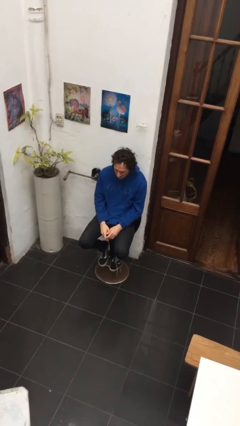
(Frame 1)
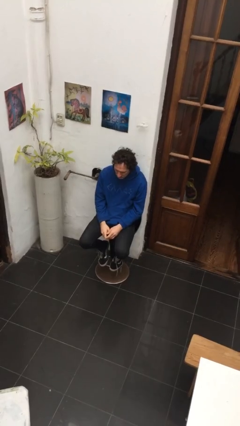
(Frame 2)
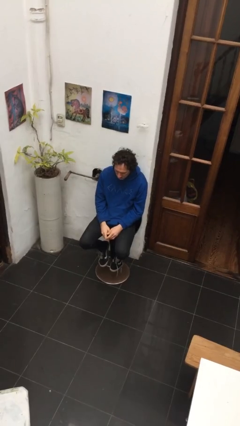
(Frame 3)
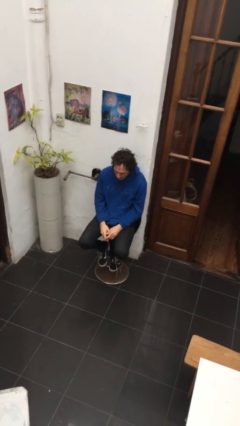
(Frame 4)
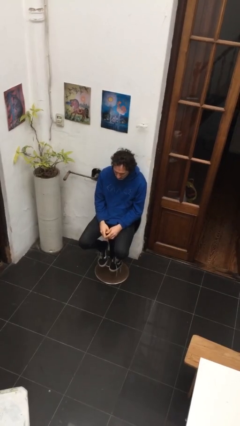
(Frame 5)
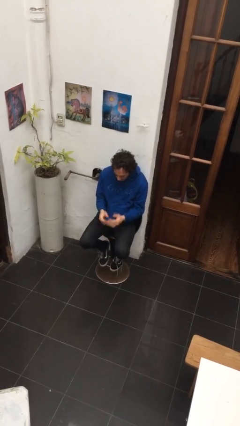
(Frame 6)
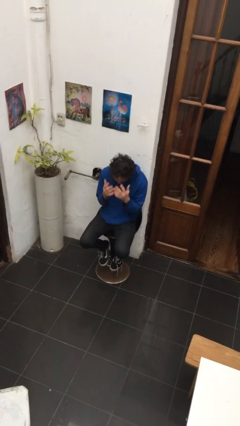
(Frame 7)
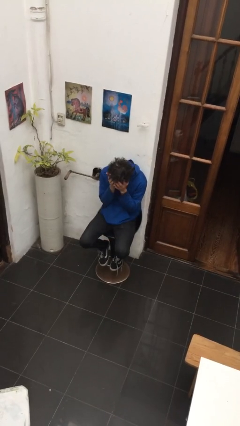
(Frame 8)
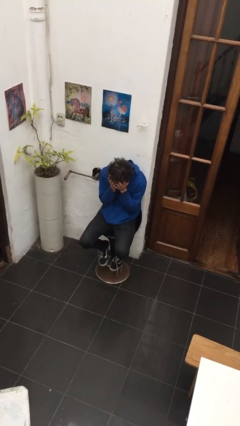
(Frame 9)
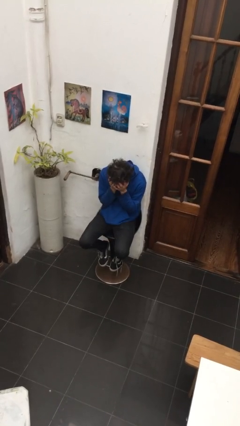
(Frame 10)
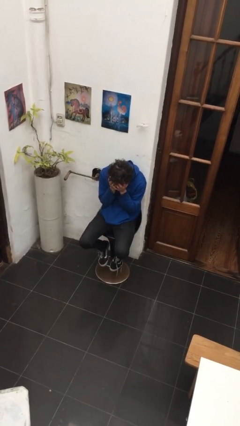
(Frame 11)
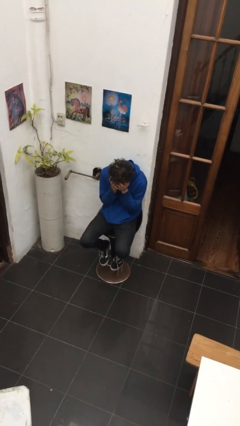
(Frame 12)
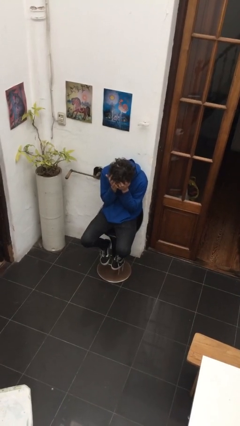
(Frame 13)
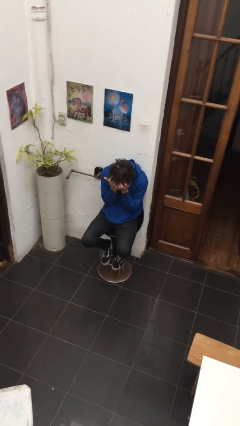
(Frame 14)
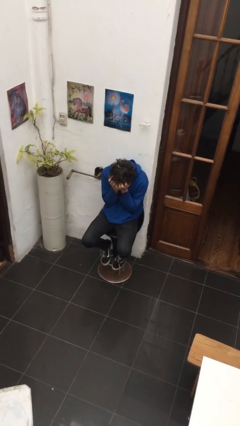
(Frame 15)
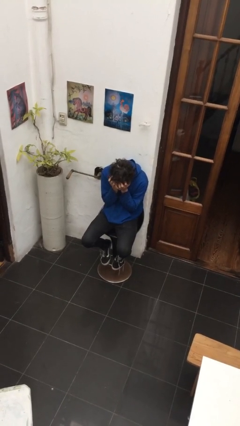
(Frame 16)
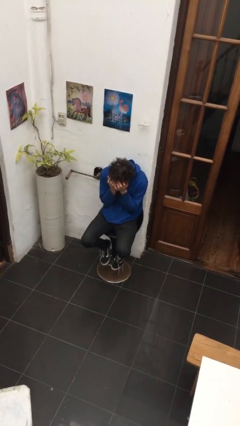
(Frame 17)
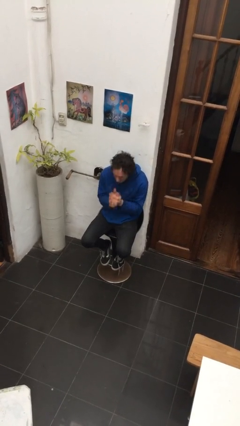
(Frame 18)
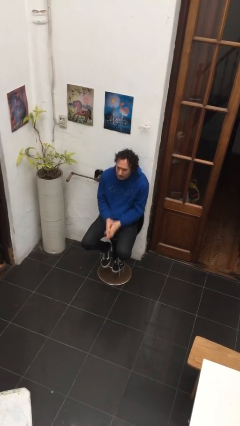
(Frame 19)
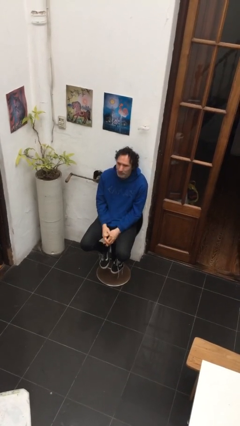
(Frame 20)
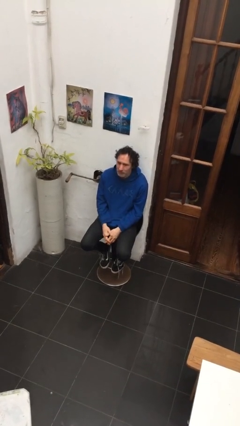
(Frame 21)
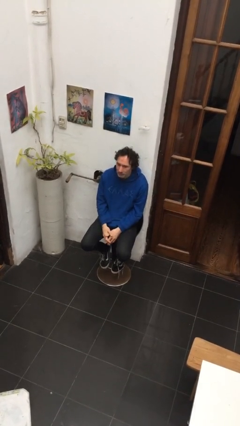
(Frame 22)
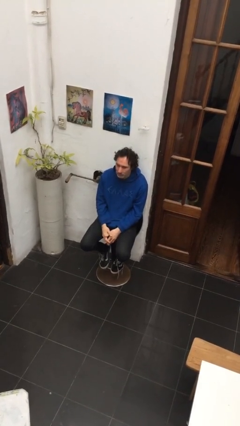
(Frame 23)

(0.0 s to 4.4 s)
person covers face with hands

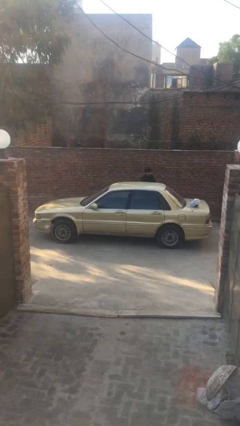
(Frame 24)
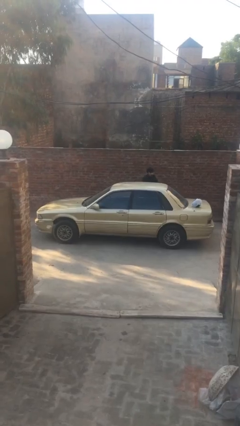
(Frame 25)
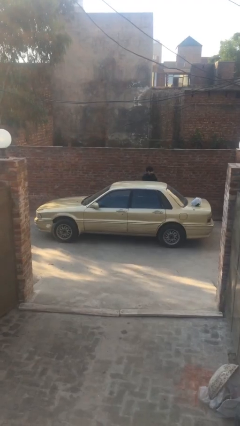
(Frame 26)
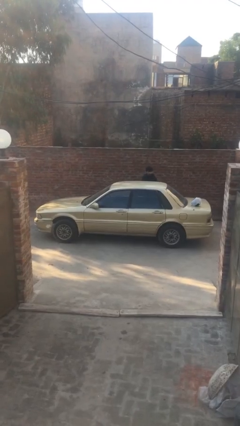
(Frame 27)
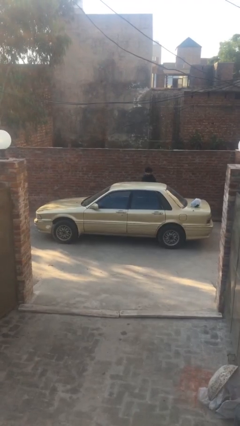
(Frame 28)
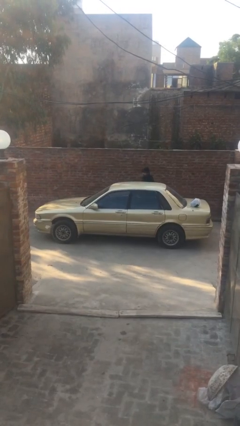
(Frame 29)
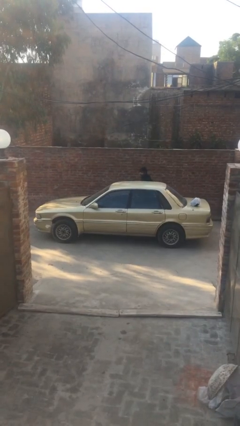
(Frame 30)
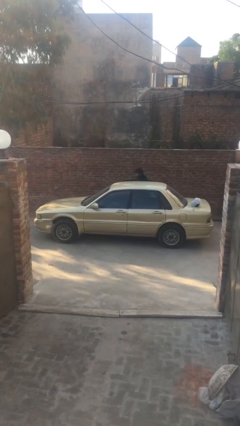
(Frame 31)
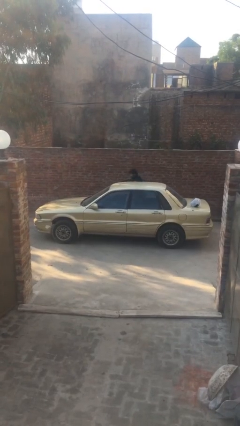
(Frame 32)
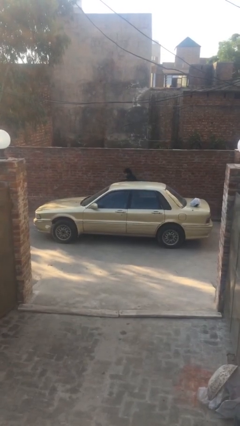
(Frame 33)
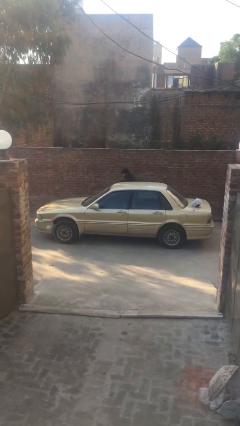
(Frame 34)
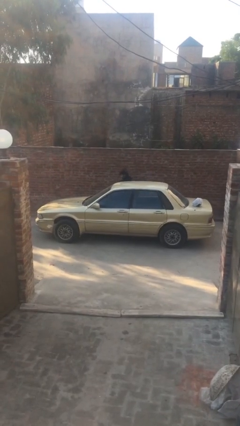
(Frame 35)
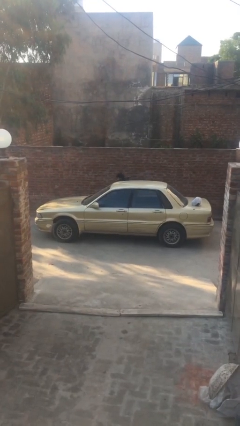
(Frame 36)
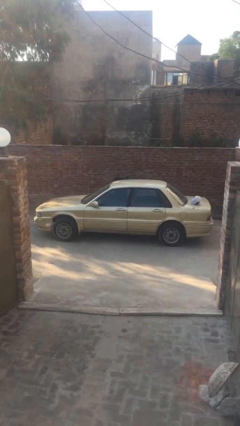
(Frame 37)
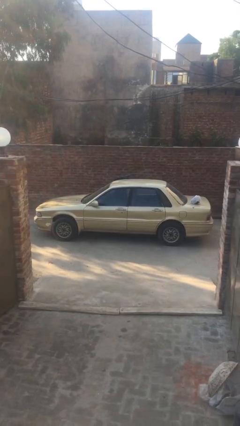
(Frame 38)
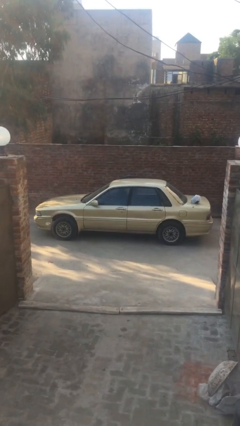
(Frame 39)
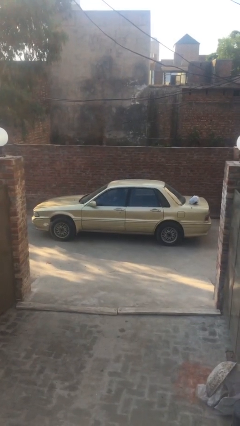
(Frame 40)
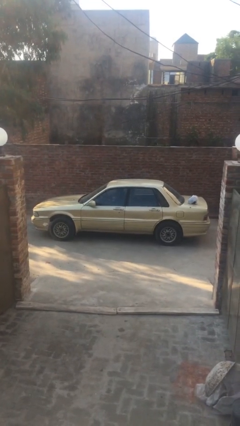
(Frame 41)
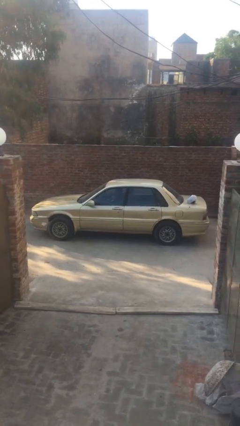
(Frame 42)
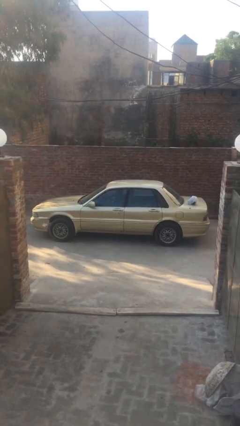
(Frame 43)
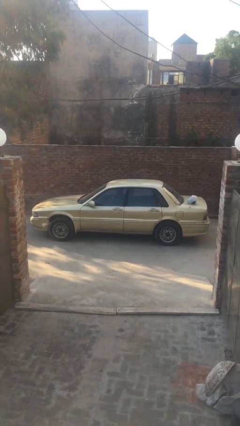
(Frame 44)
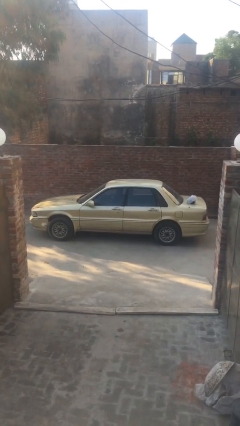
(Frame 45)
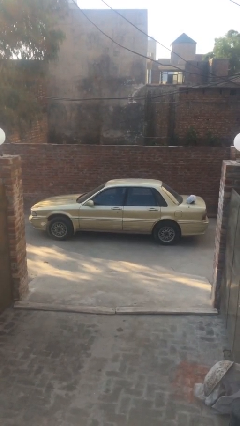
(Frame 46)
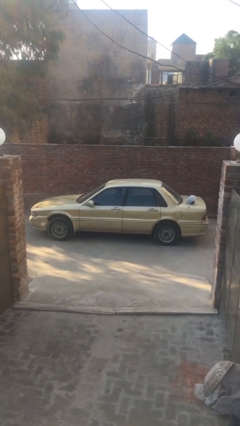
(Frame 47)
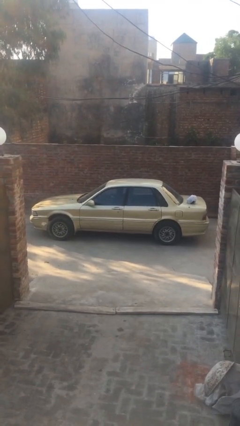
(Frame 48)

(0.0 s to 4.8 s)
car picks up person

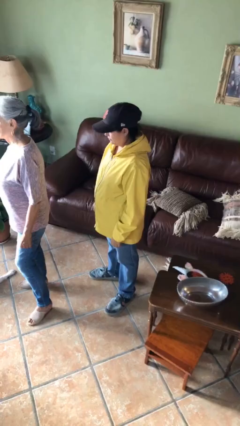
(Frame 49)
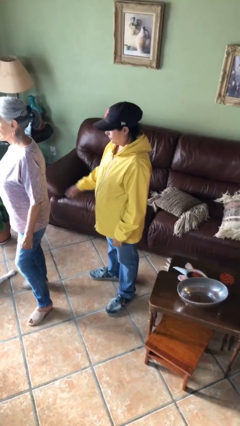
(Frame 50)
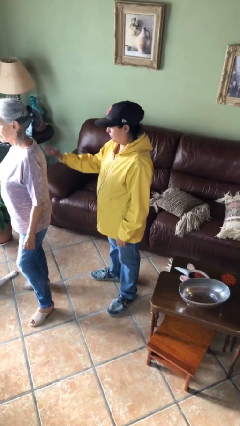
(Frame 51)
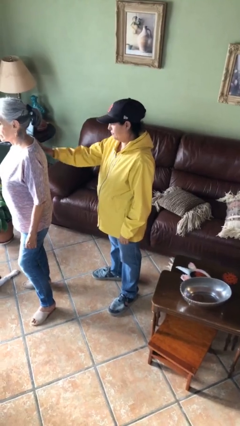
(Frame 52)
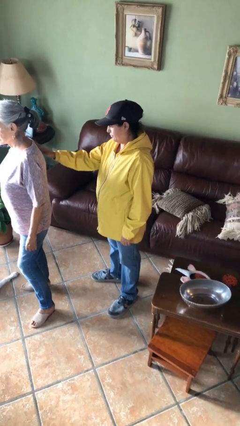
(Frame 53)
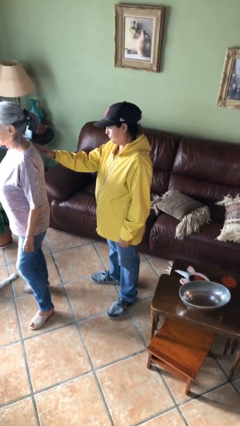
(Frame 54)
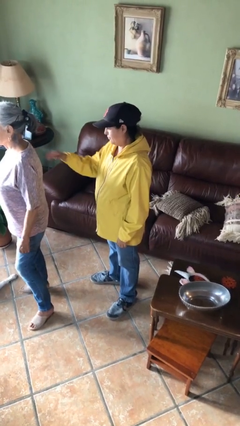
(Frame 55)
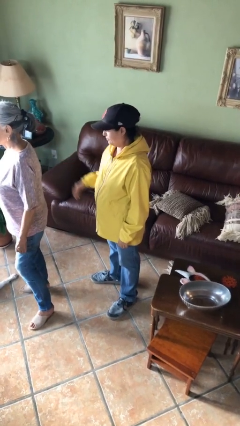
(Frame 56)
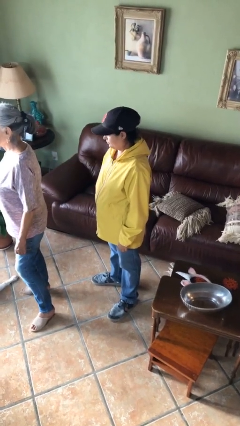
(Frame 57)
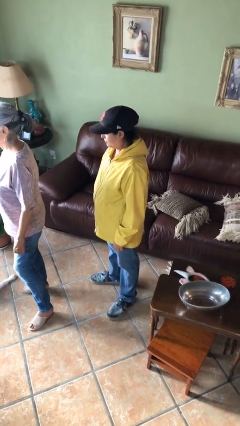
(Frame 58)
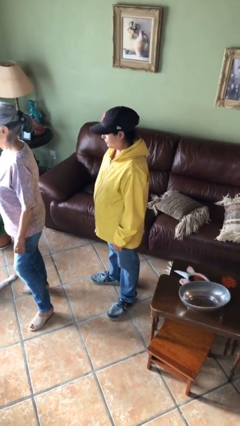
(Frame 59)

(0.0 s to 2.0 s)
person touches back of person

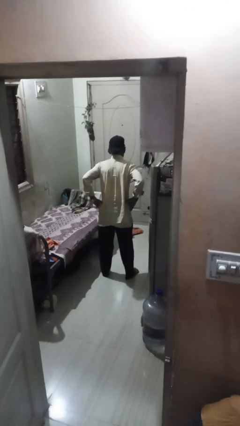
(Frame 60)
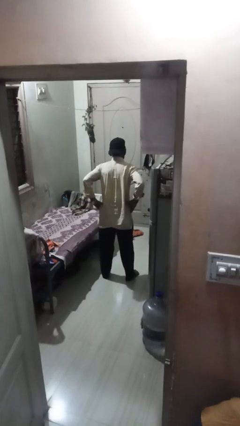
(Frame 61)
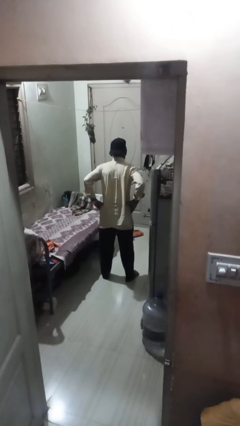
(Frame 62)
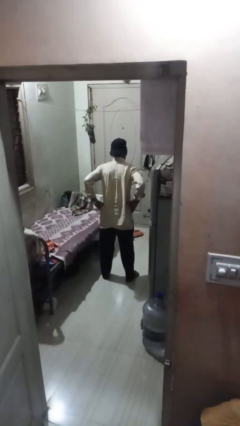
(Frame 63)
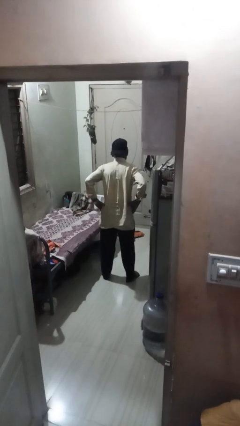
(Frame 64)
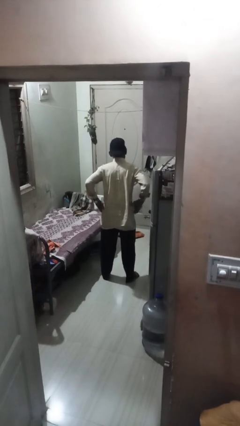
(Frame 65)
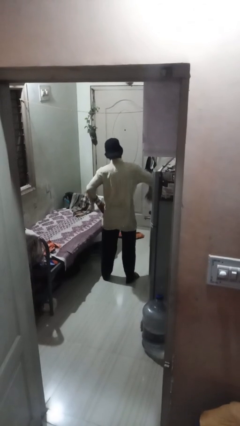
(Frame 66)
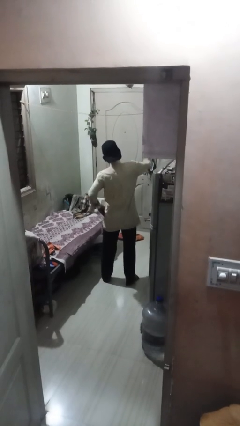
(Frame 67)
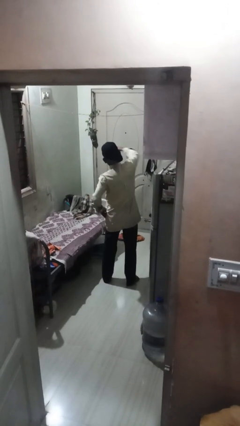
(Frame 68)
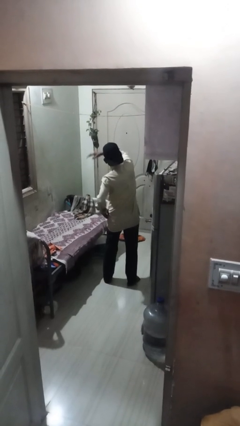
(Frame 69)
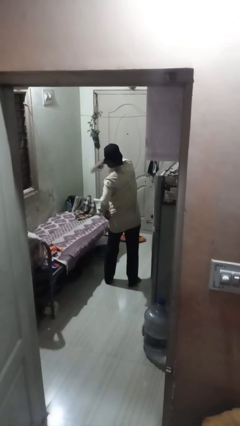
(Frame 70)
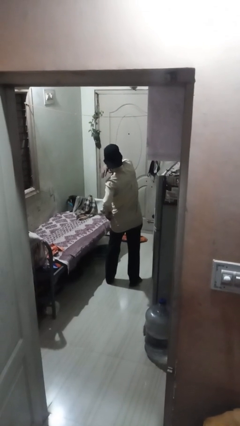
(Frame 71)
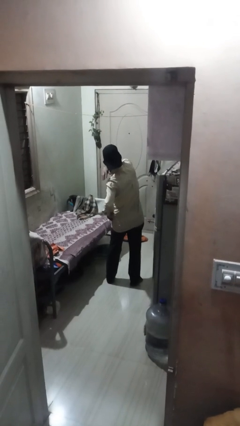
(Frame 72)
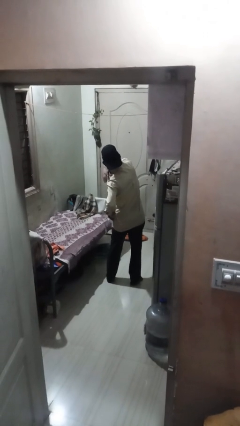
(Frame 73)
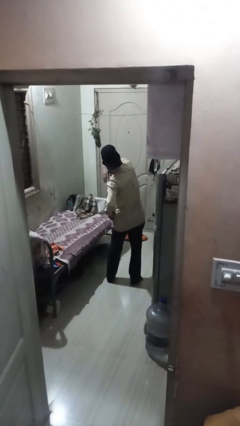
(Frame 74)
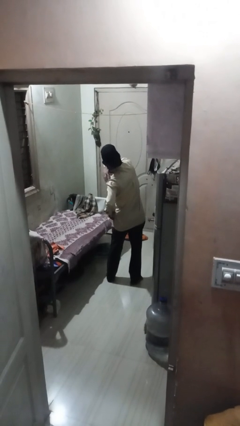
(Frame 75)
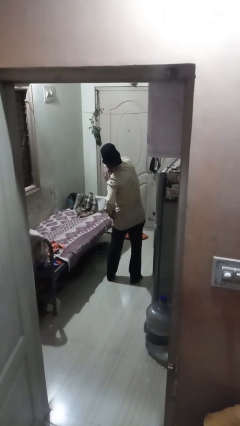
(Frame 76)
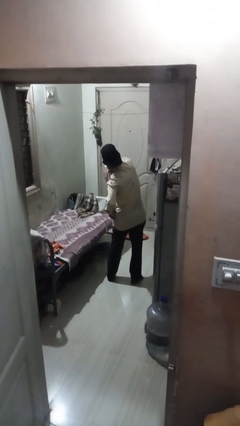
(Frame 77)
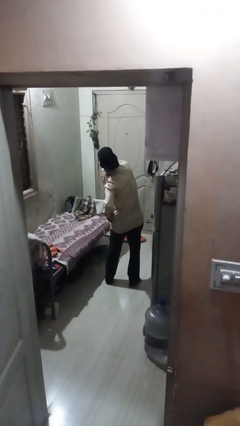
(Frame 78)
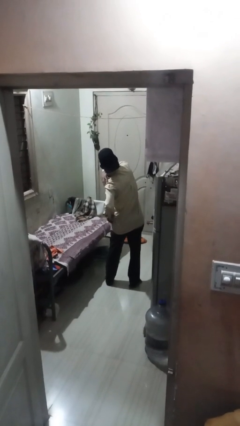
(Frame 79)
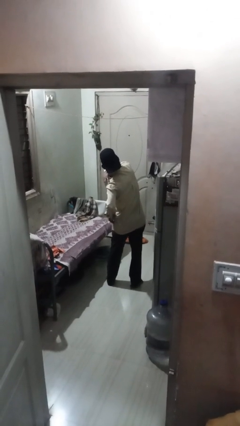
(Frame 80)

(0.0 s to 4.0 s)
person stretches arms to side

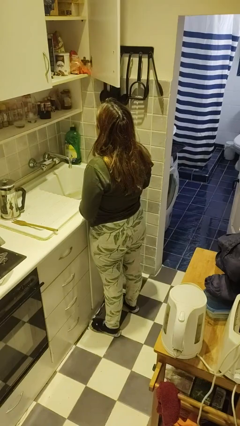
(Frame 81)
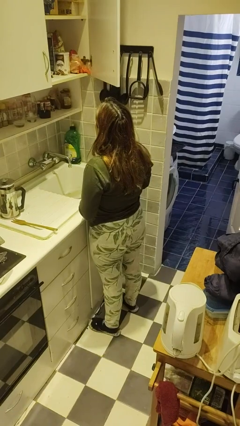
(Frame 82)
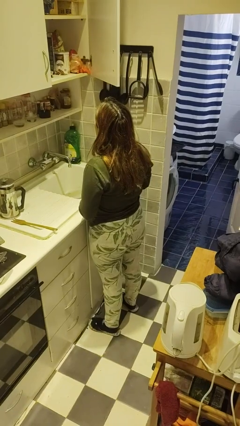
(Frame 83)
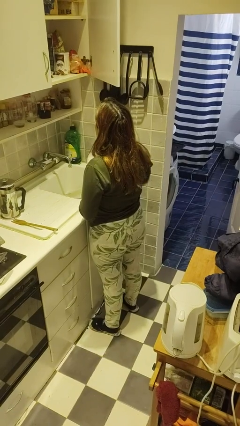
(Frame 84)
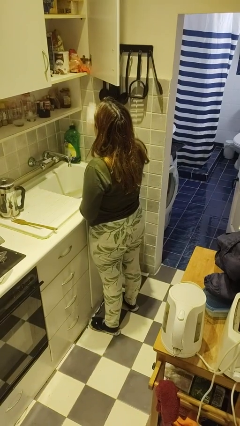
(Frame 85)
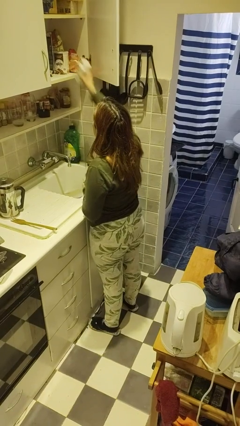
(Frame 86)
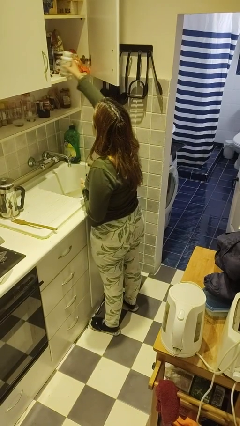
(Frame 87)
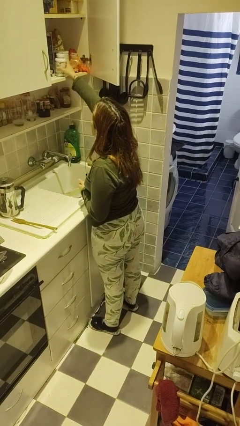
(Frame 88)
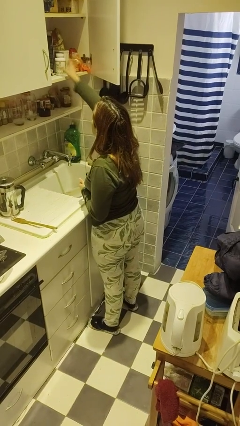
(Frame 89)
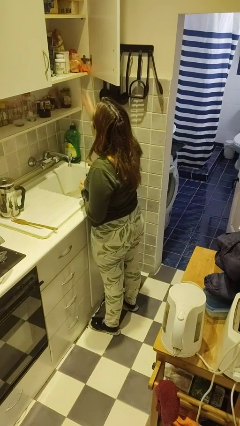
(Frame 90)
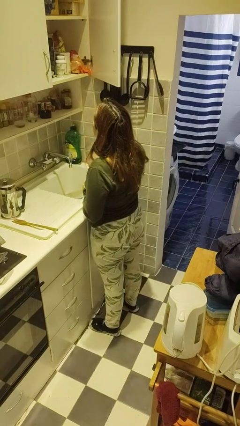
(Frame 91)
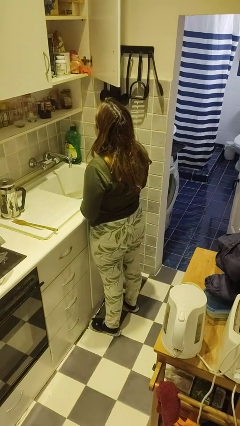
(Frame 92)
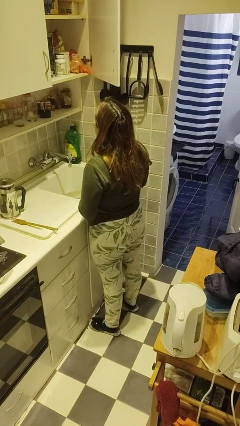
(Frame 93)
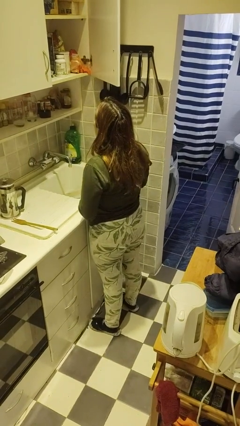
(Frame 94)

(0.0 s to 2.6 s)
person puts object in cabinet
